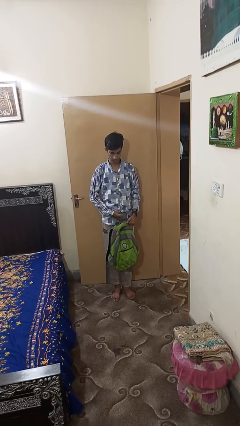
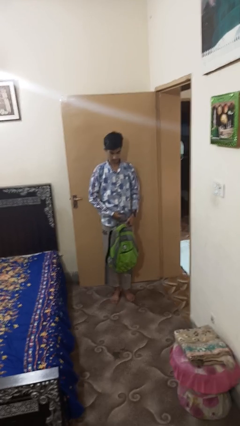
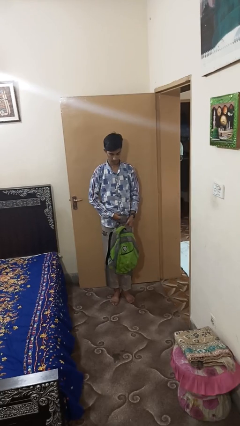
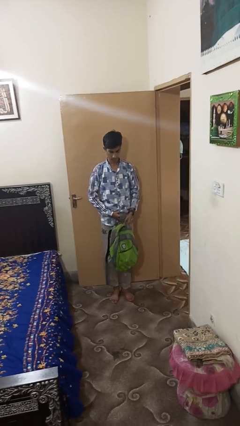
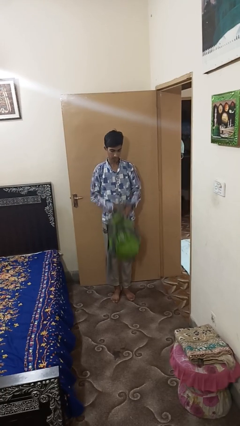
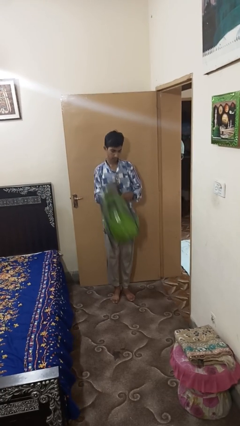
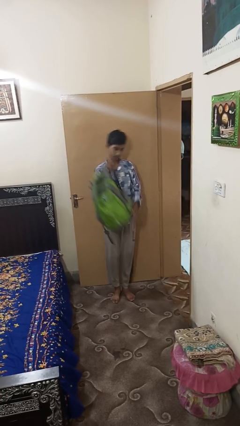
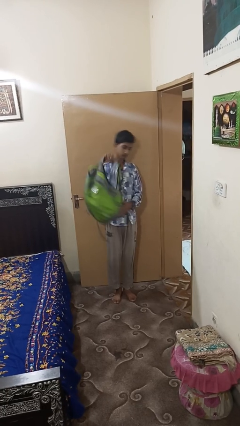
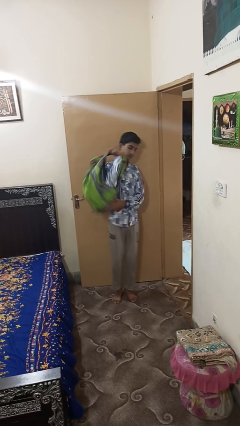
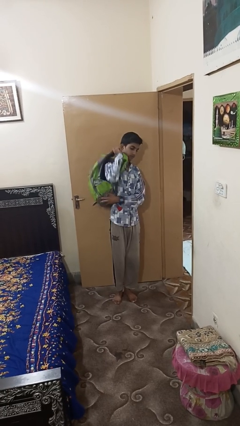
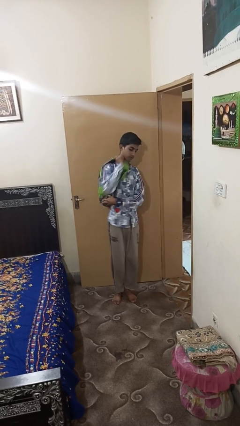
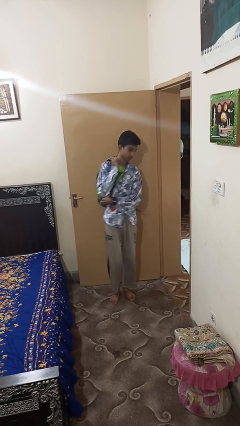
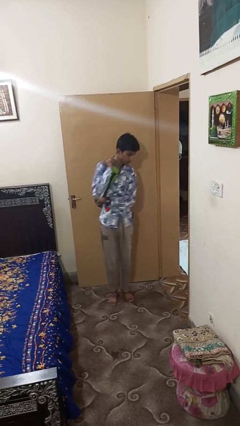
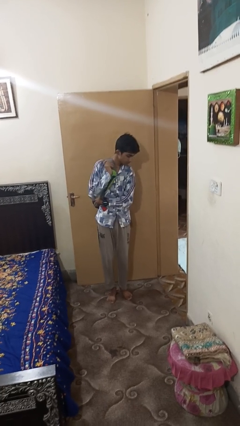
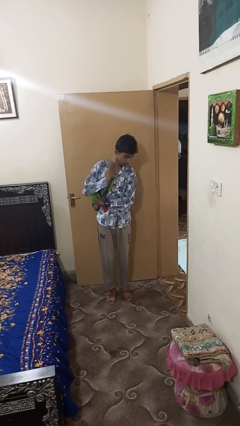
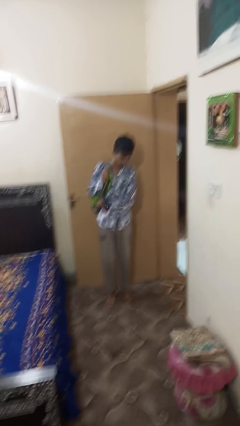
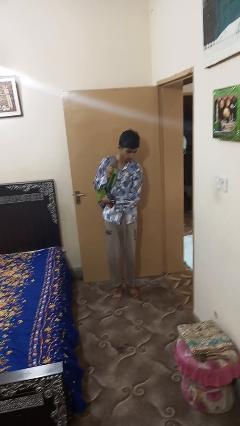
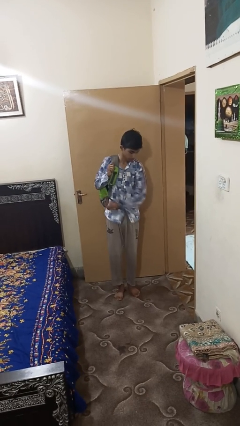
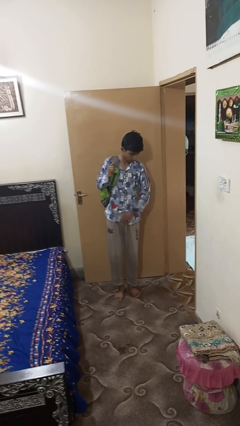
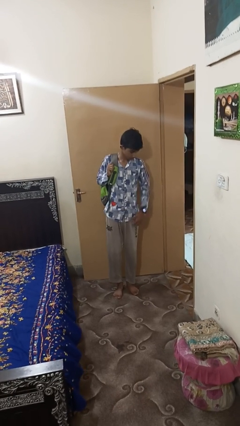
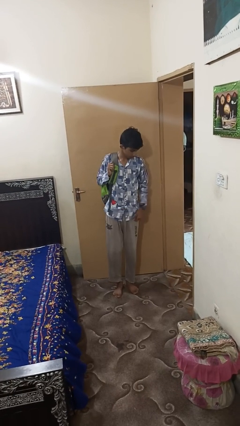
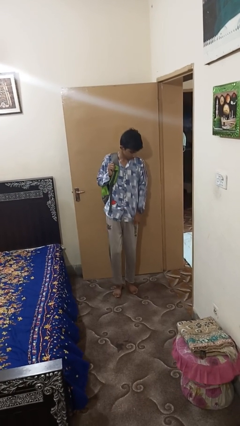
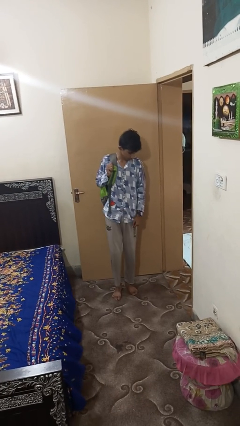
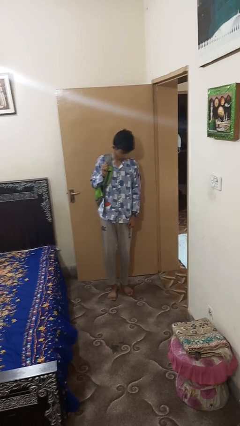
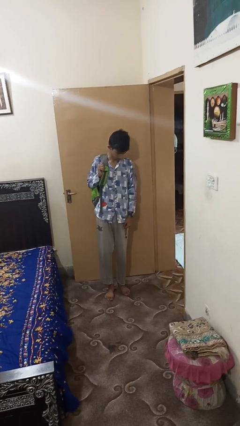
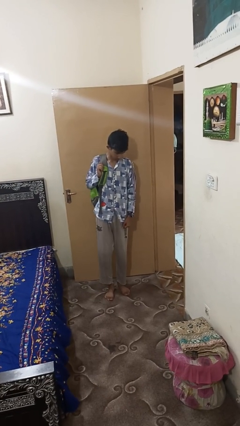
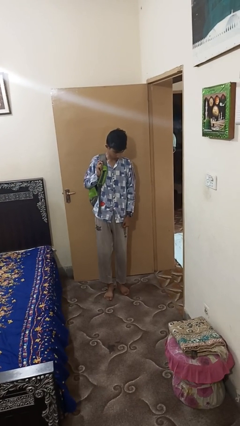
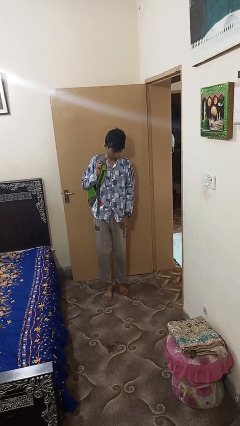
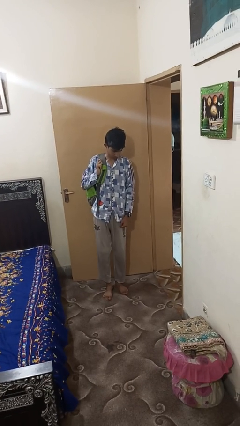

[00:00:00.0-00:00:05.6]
person puts on backpack

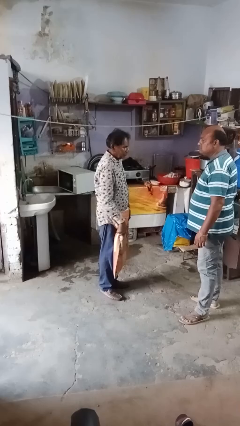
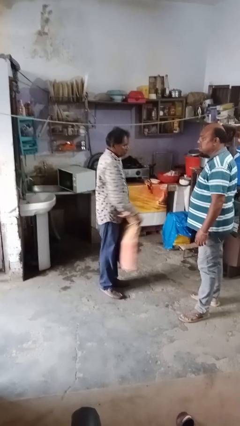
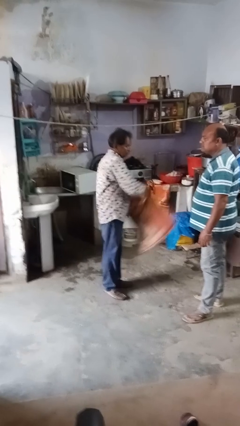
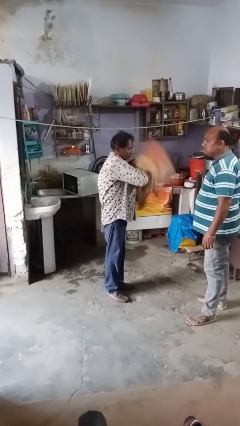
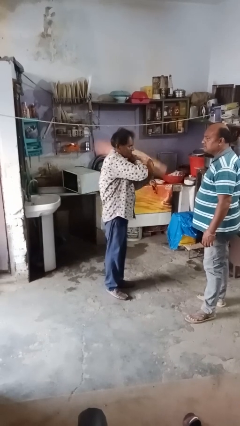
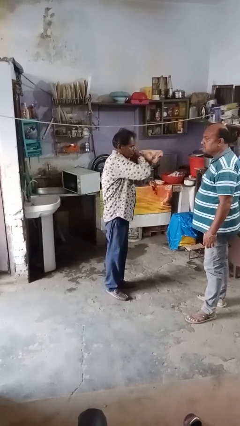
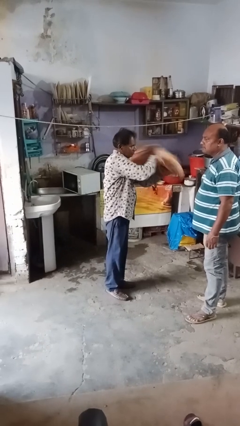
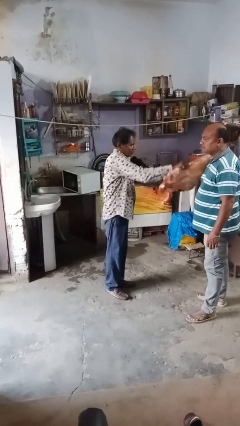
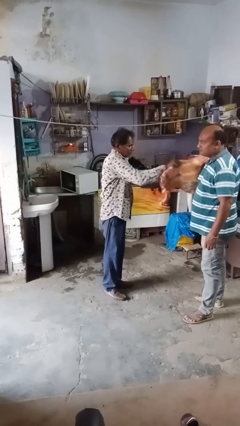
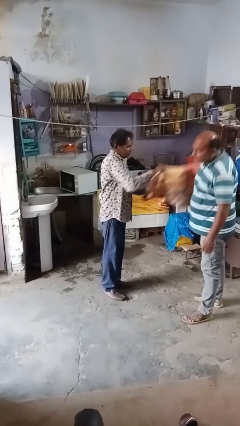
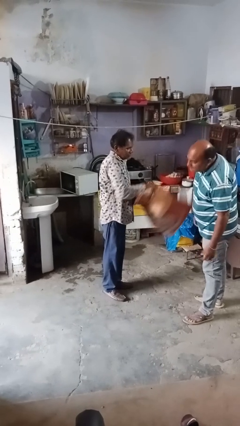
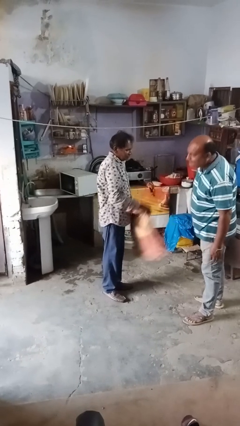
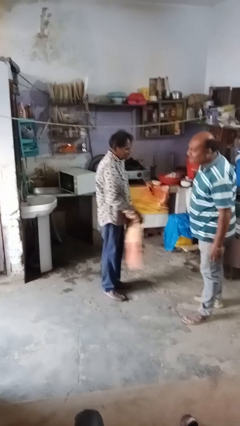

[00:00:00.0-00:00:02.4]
person hits person with pillow

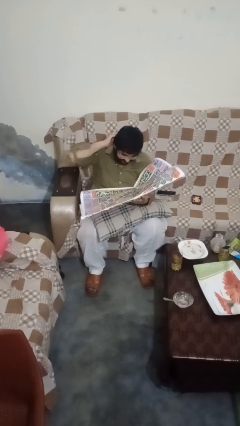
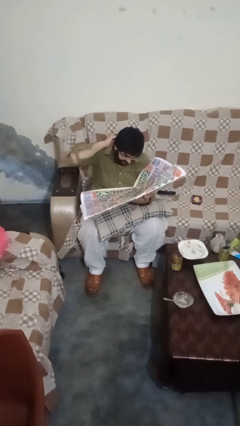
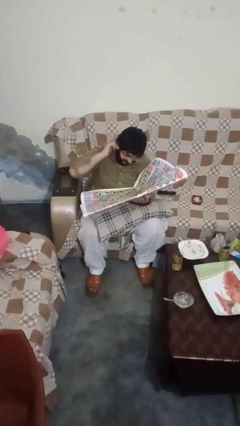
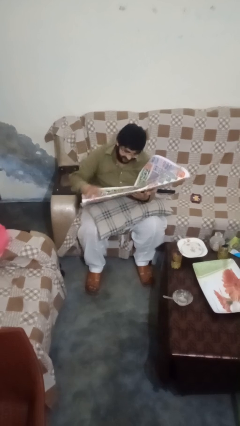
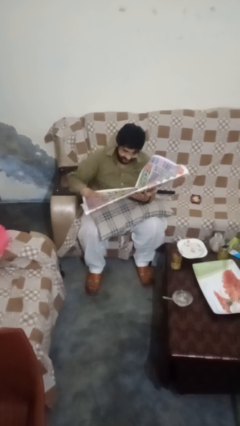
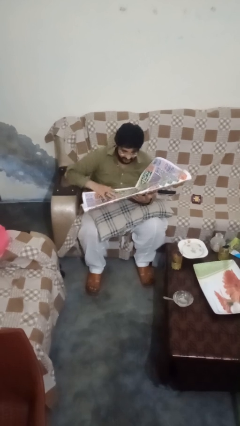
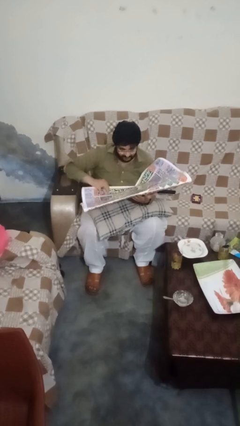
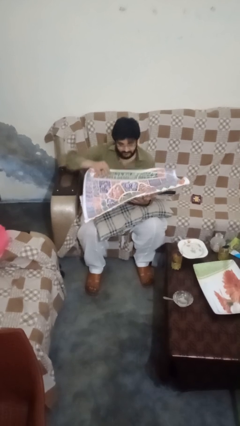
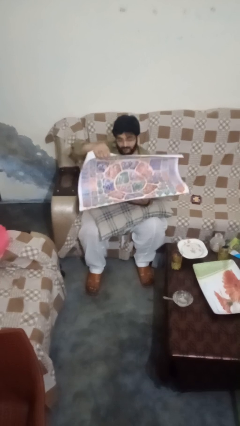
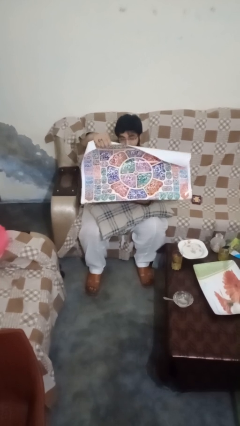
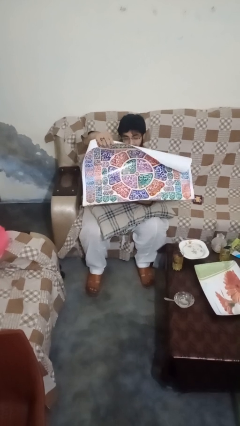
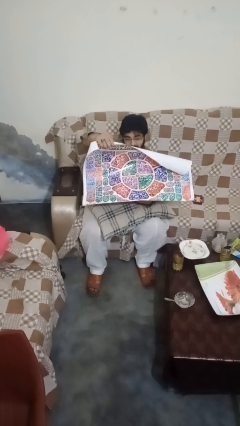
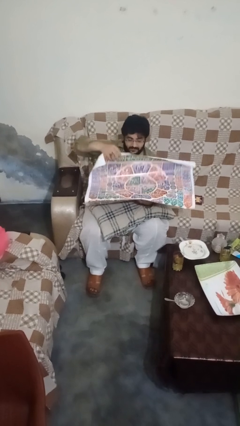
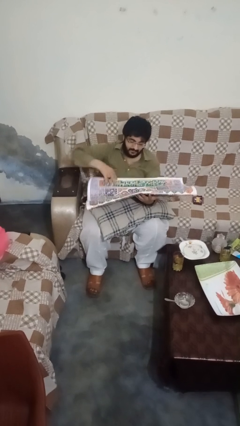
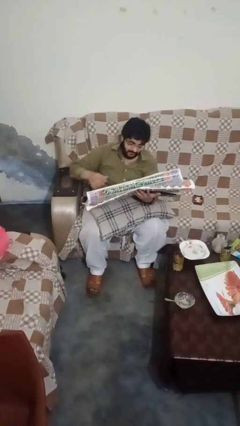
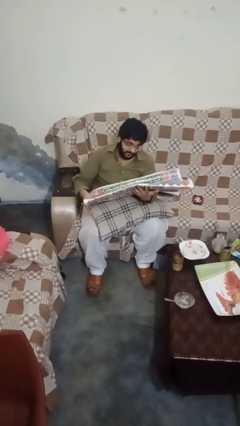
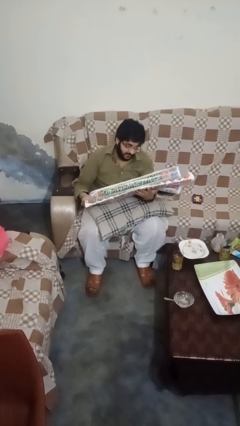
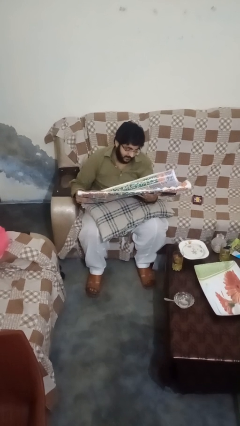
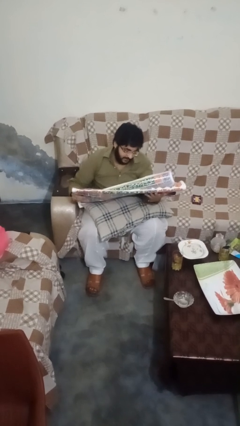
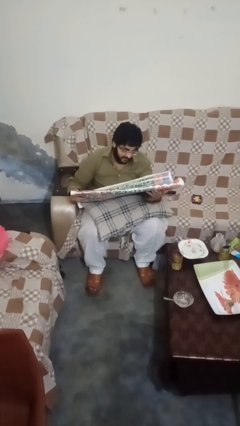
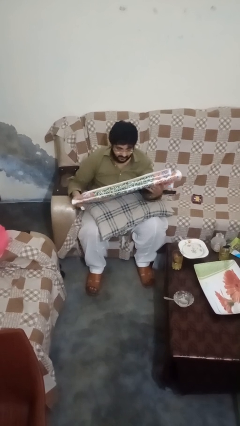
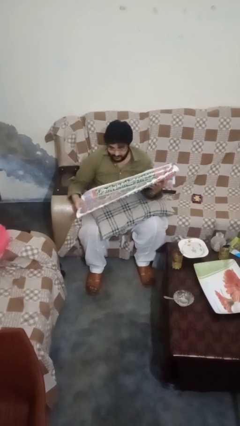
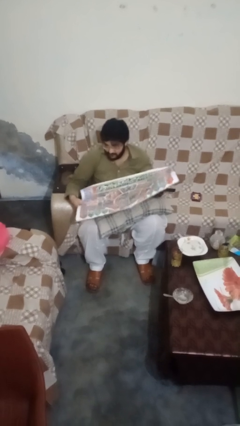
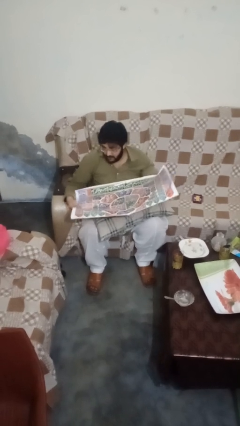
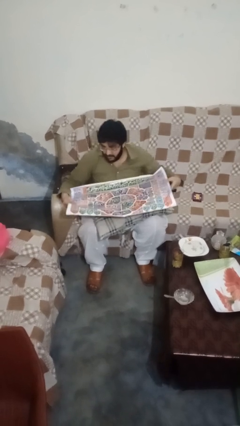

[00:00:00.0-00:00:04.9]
person reads newspaper

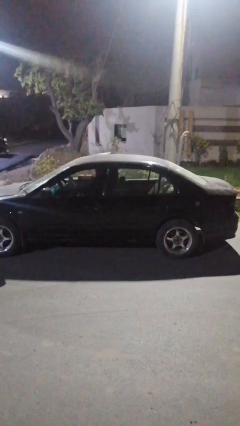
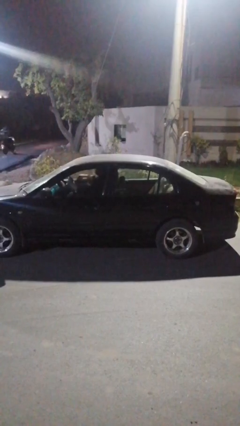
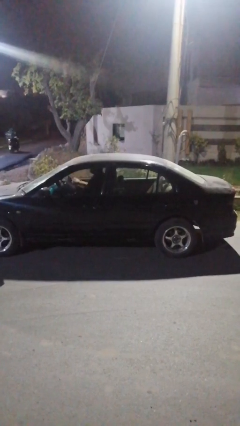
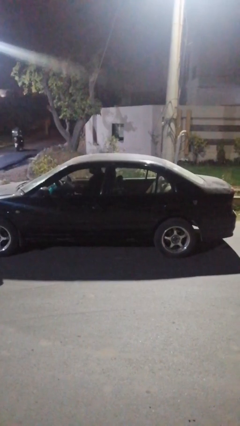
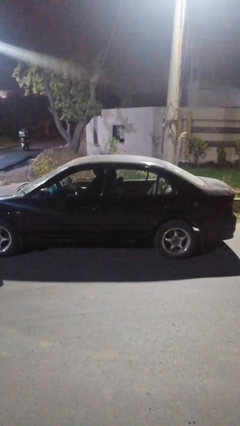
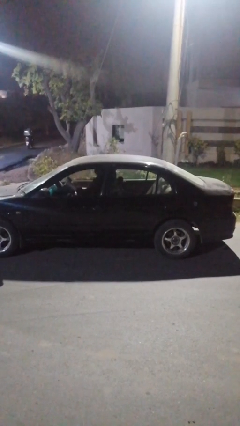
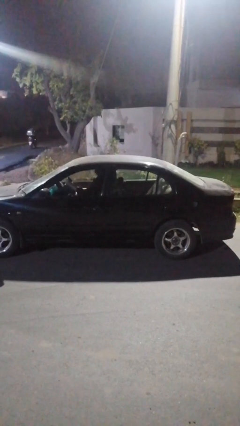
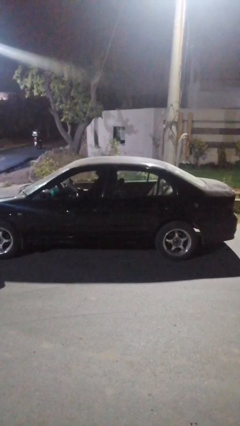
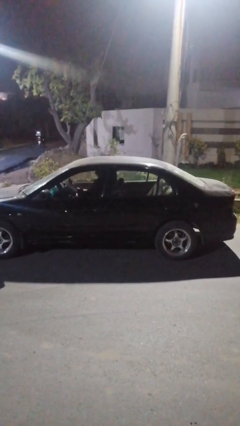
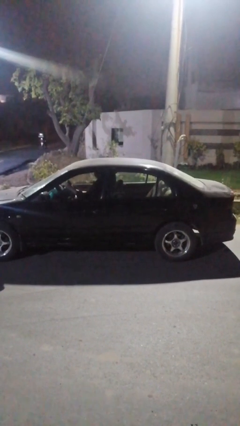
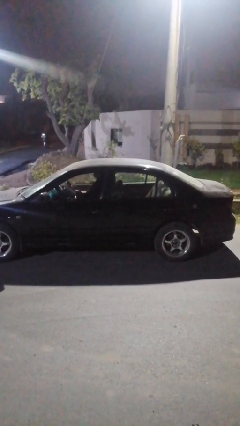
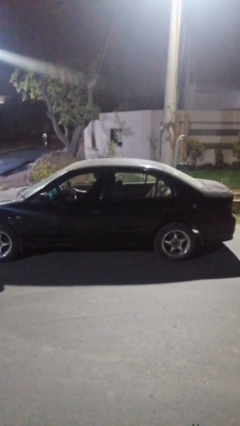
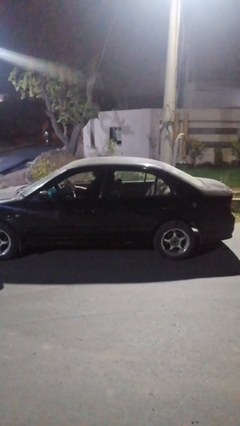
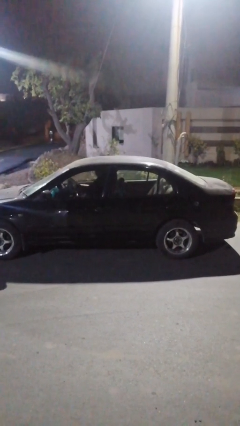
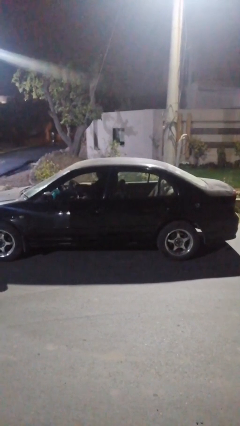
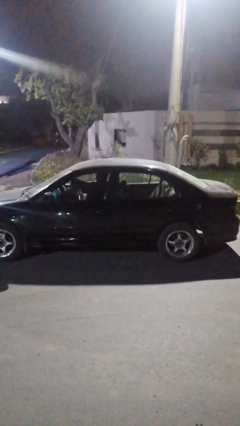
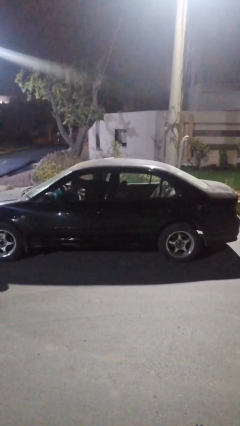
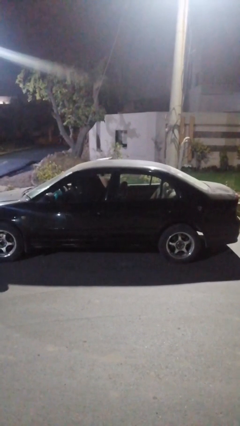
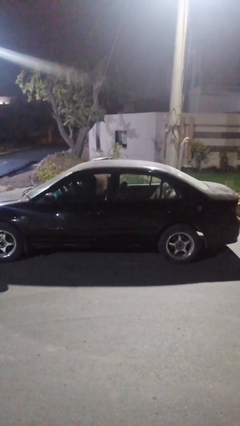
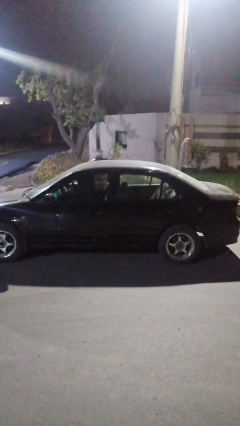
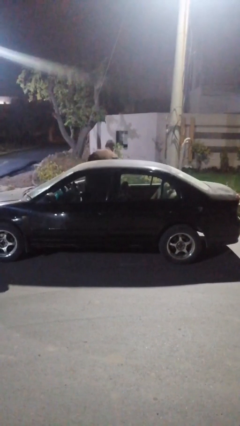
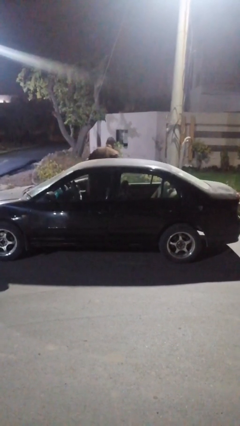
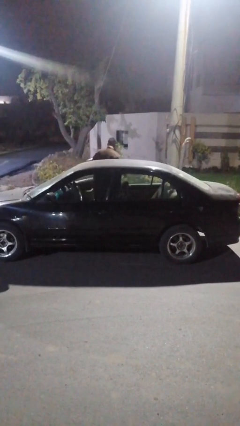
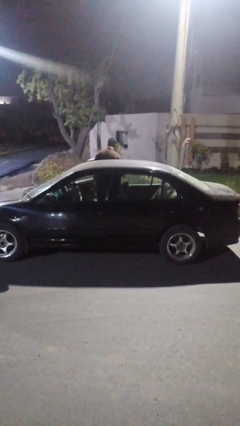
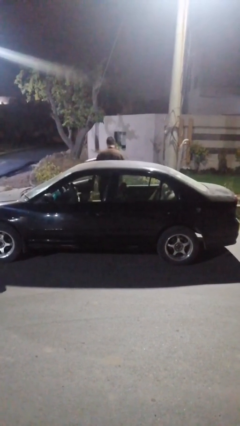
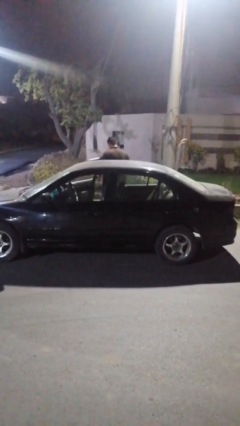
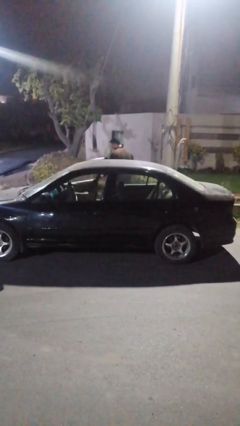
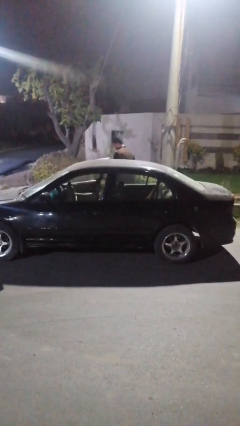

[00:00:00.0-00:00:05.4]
car picks up person
